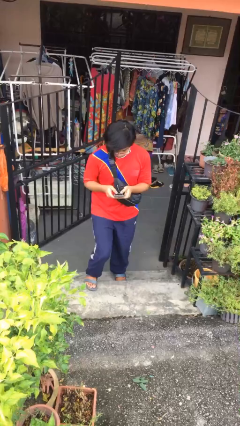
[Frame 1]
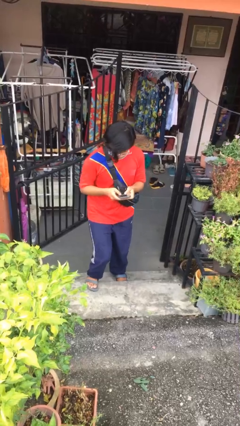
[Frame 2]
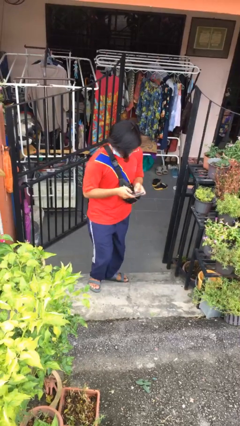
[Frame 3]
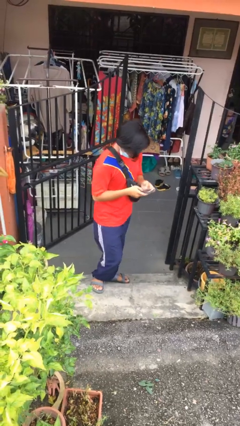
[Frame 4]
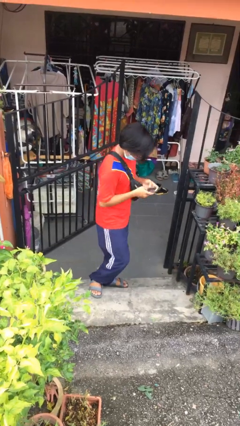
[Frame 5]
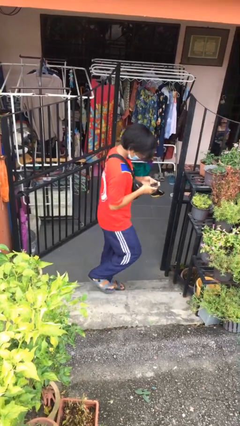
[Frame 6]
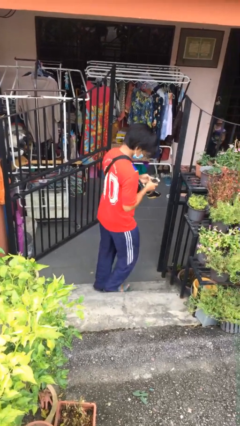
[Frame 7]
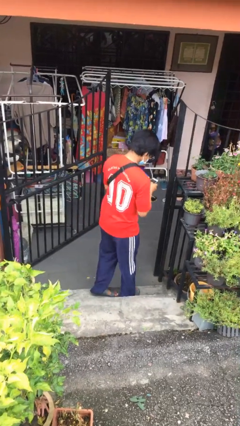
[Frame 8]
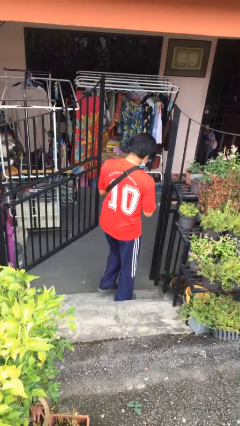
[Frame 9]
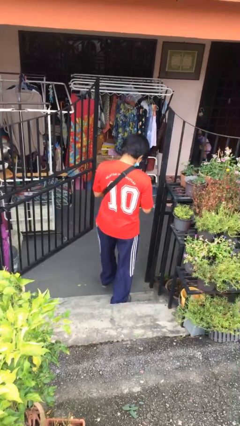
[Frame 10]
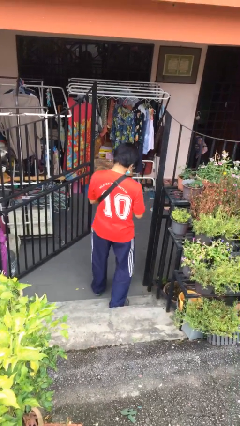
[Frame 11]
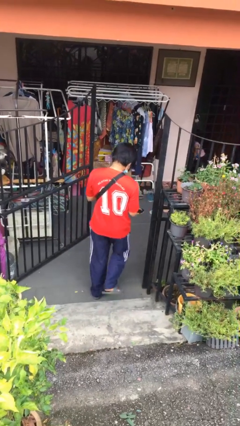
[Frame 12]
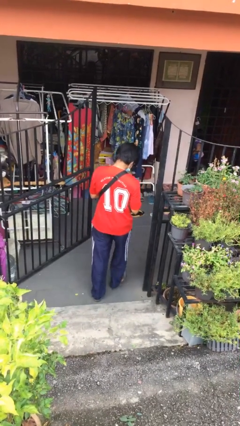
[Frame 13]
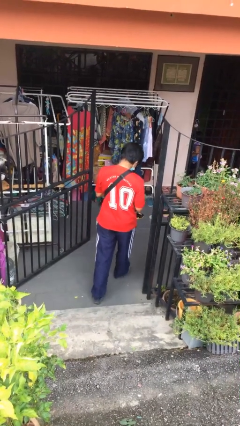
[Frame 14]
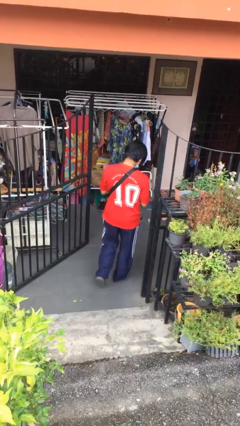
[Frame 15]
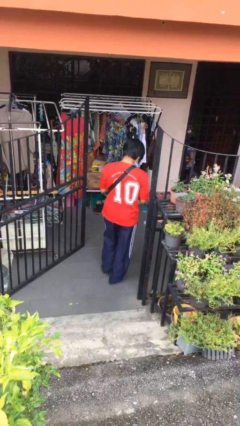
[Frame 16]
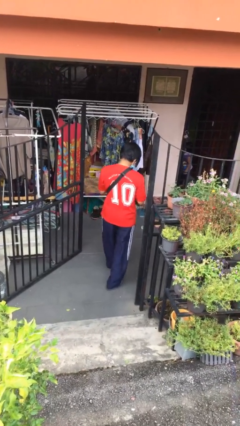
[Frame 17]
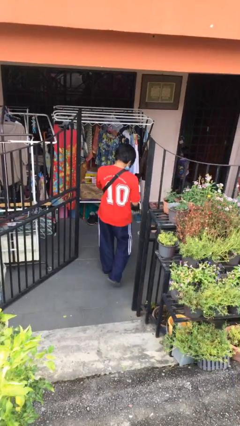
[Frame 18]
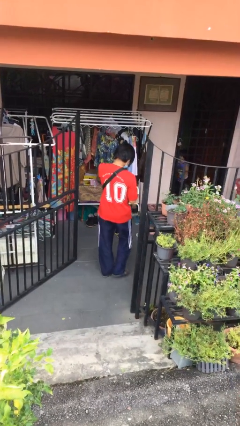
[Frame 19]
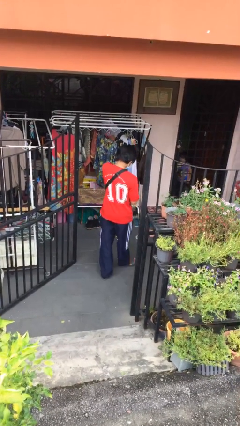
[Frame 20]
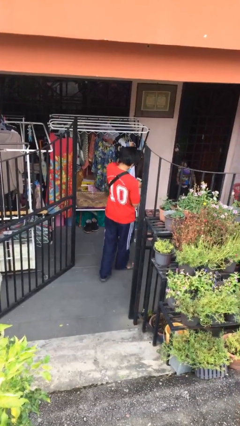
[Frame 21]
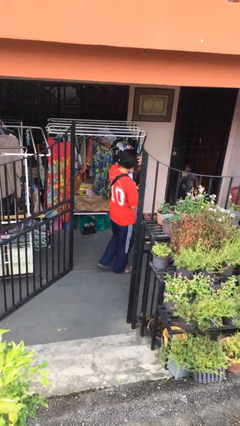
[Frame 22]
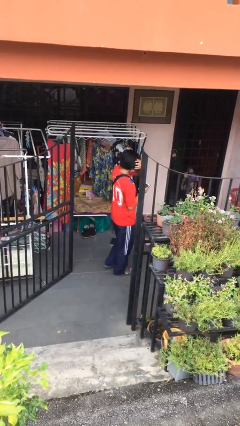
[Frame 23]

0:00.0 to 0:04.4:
person exits scene through structure

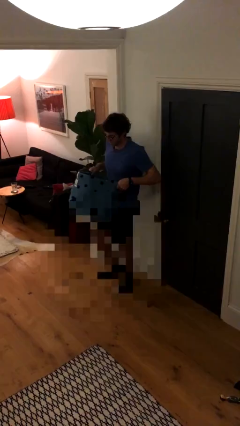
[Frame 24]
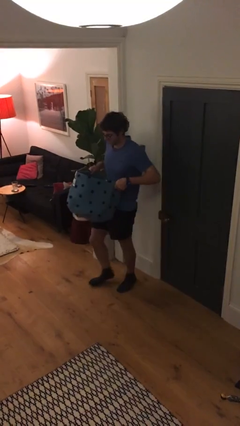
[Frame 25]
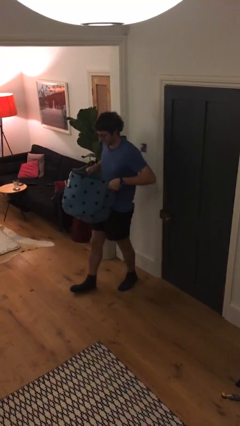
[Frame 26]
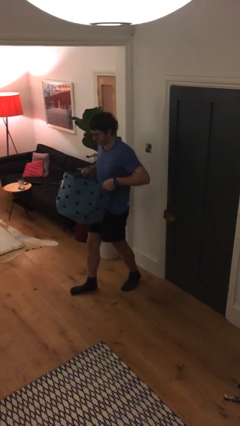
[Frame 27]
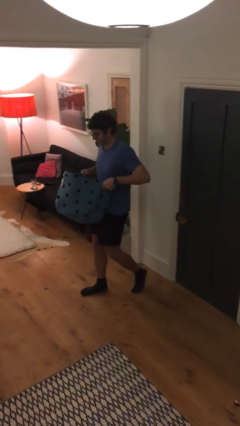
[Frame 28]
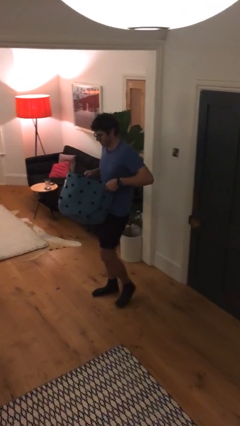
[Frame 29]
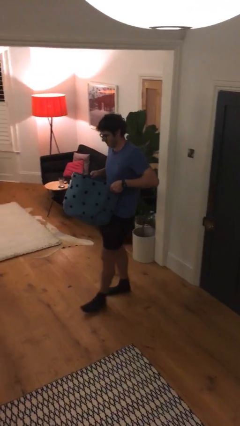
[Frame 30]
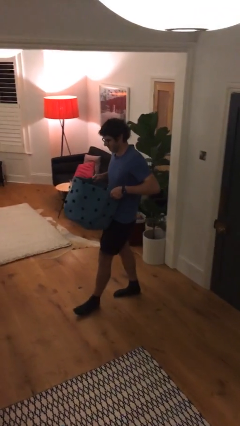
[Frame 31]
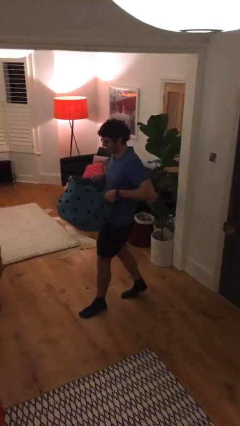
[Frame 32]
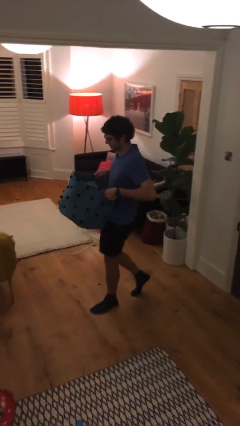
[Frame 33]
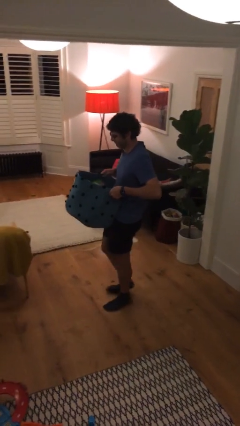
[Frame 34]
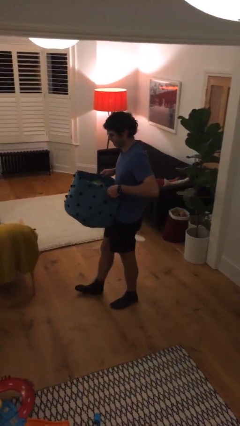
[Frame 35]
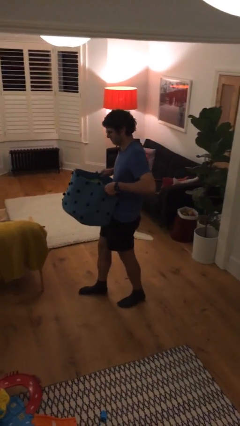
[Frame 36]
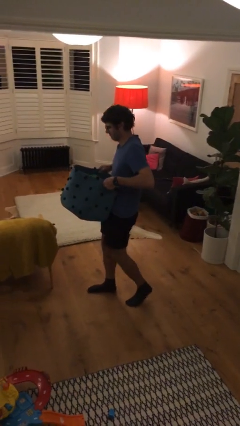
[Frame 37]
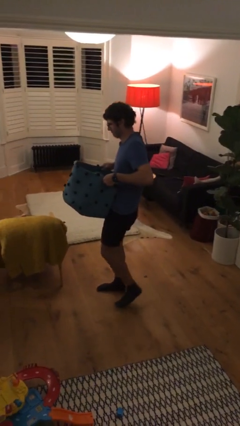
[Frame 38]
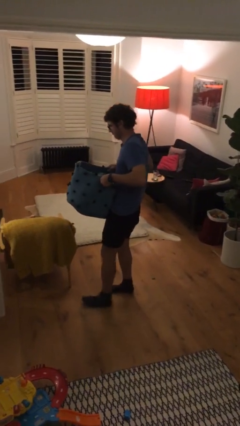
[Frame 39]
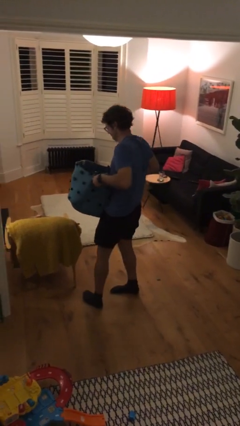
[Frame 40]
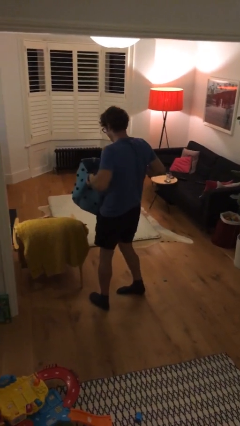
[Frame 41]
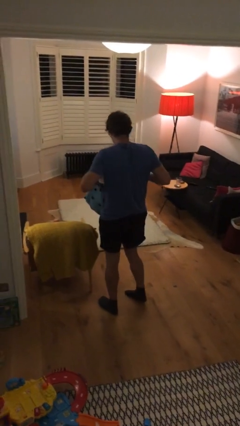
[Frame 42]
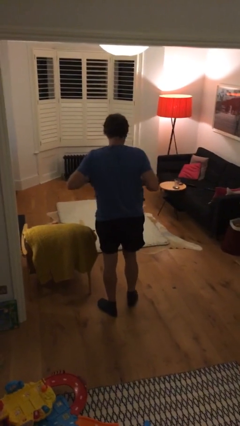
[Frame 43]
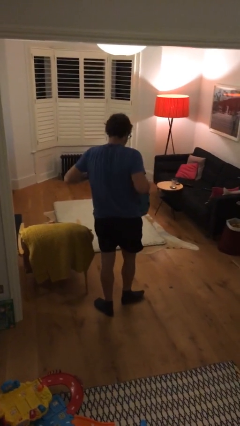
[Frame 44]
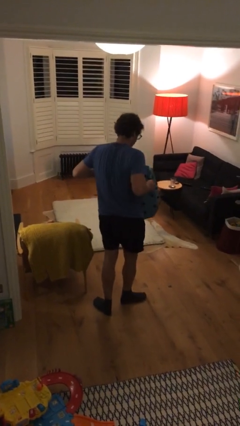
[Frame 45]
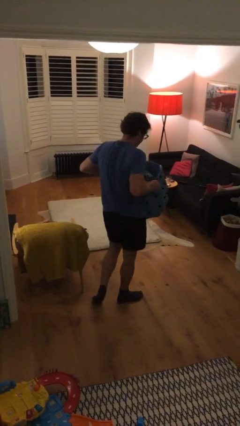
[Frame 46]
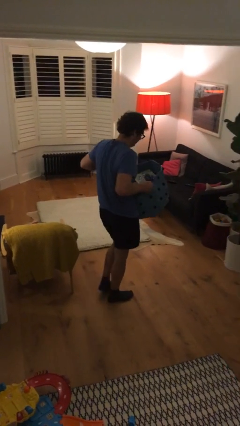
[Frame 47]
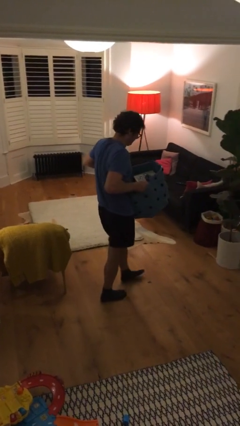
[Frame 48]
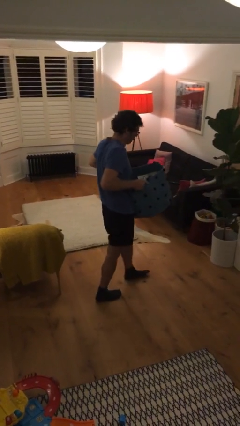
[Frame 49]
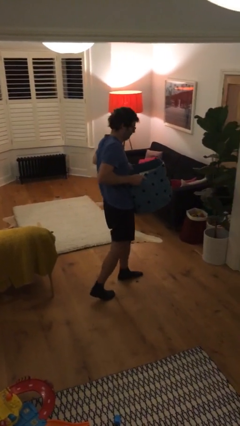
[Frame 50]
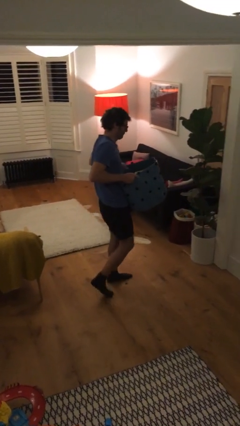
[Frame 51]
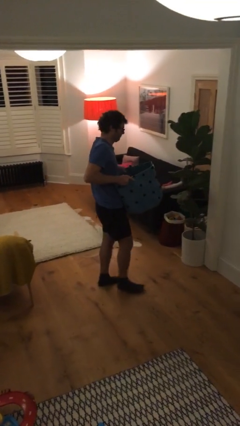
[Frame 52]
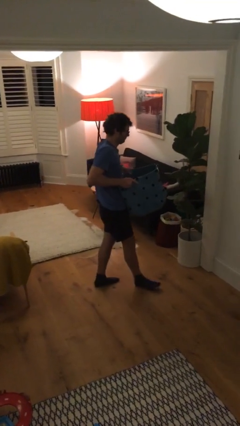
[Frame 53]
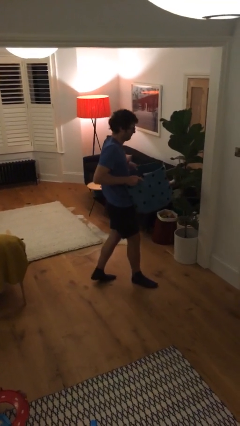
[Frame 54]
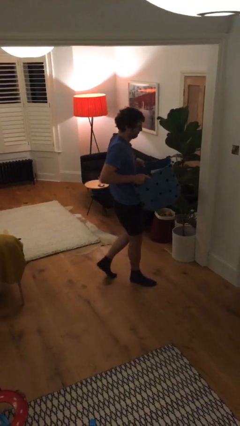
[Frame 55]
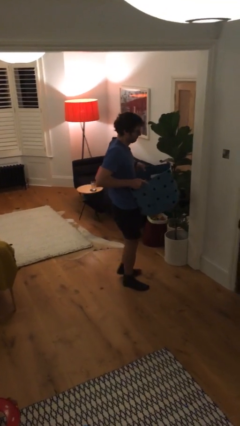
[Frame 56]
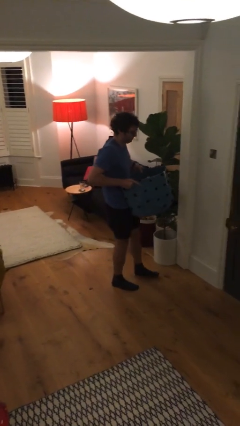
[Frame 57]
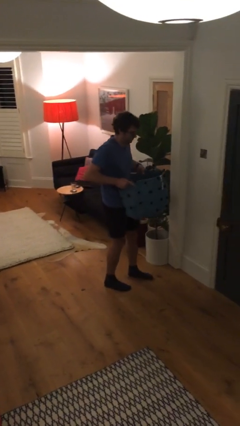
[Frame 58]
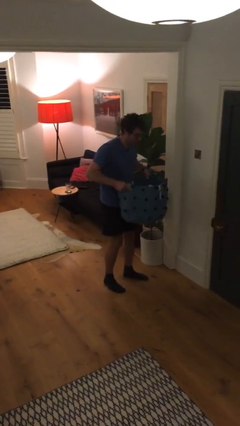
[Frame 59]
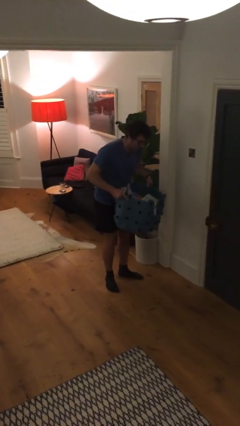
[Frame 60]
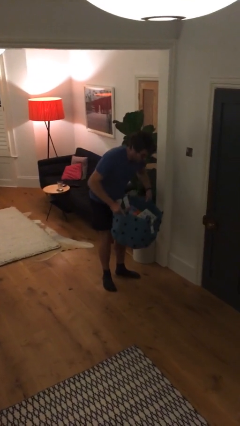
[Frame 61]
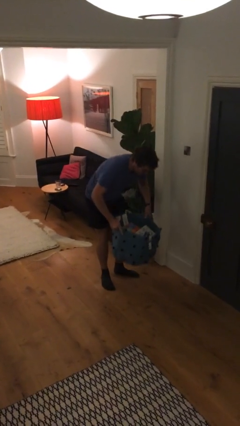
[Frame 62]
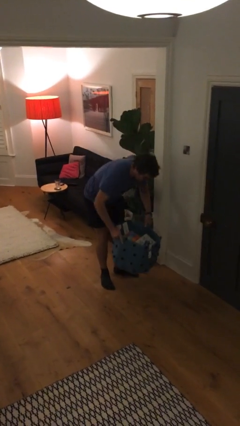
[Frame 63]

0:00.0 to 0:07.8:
person carries heavy object

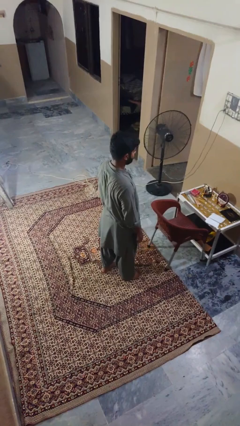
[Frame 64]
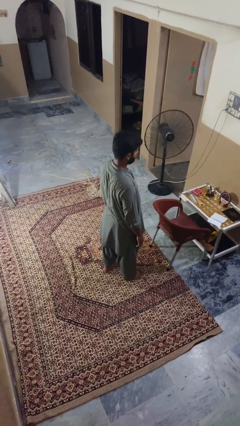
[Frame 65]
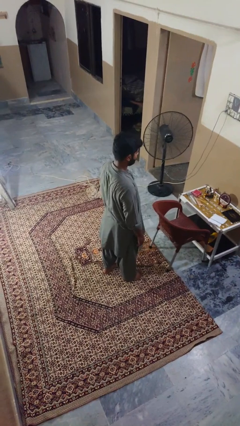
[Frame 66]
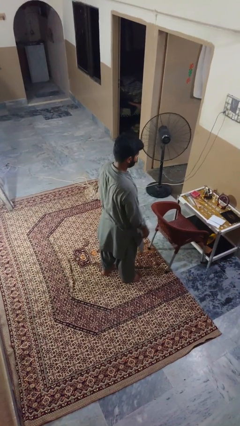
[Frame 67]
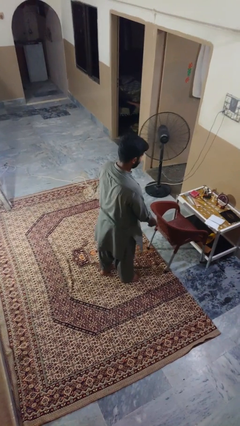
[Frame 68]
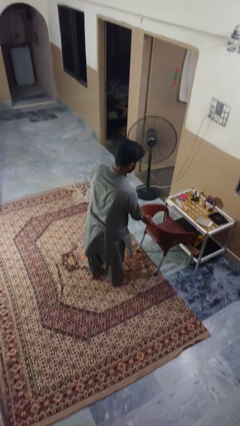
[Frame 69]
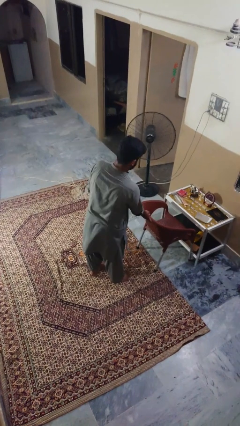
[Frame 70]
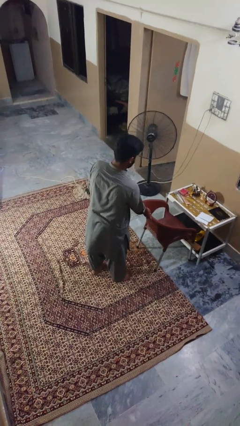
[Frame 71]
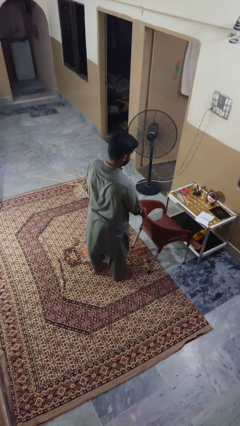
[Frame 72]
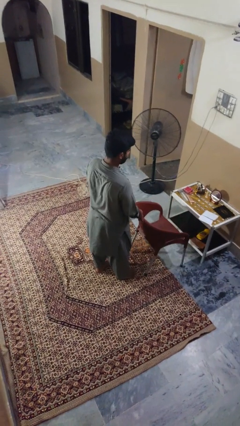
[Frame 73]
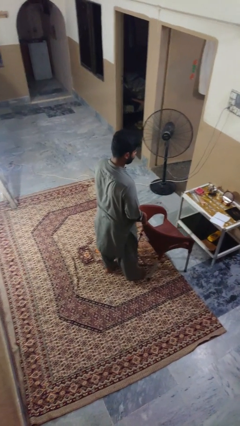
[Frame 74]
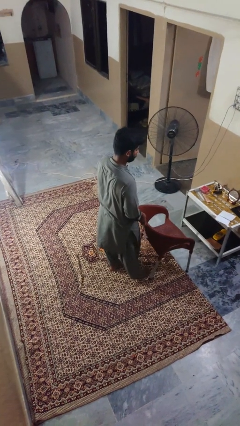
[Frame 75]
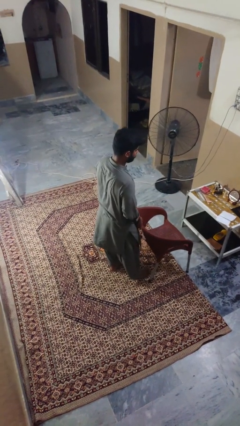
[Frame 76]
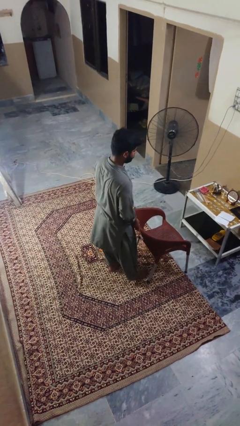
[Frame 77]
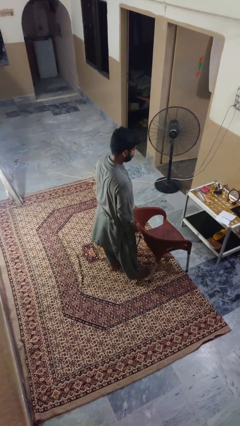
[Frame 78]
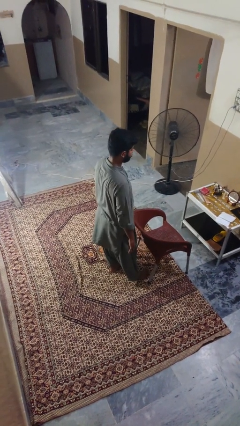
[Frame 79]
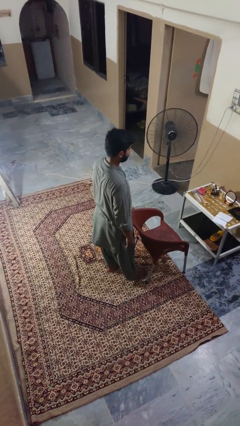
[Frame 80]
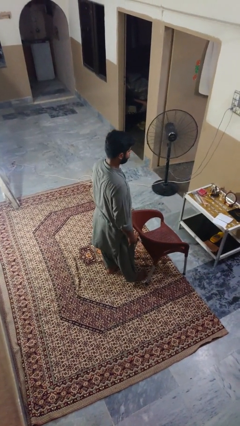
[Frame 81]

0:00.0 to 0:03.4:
person pulls out chair

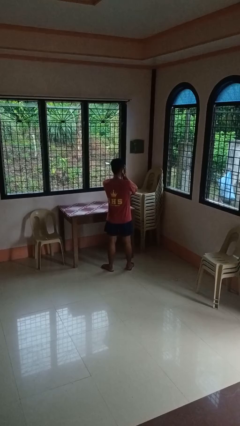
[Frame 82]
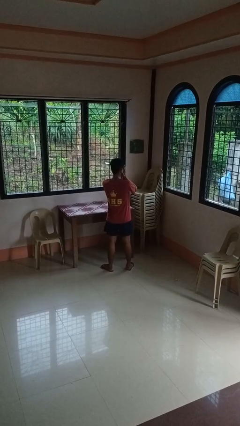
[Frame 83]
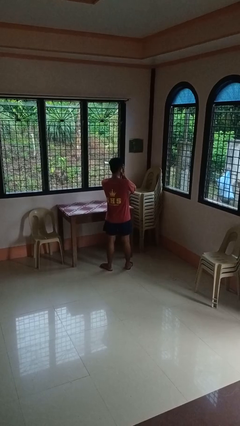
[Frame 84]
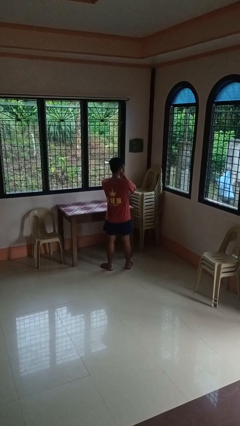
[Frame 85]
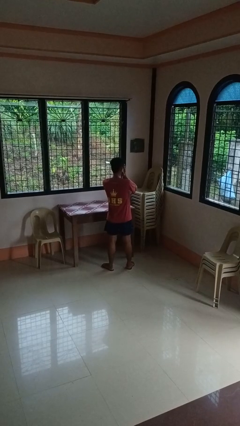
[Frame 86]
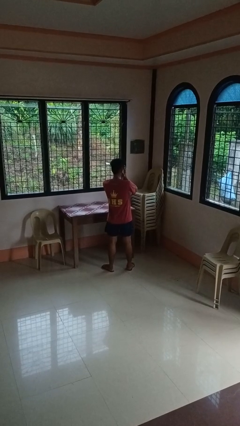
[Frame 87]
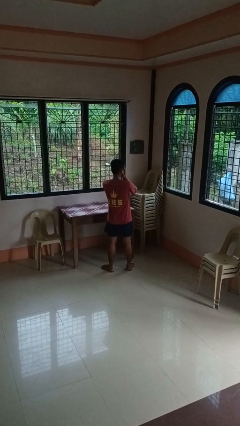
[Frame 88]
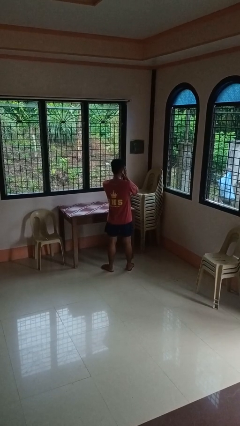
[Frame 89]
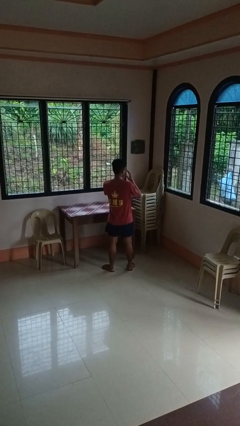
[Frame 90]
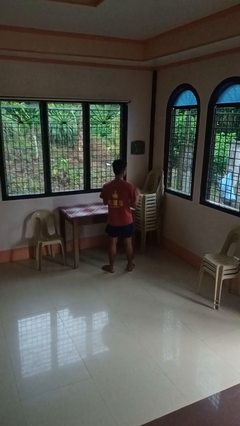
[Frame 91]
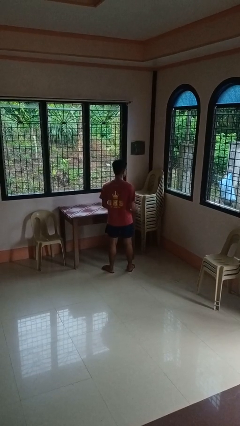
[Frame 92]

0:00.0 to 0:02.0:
person covers face with hands

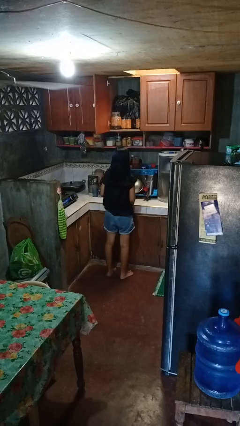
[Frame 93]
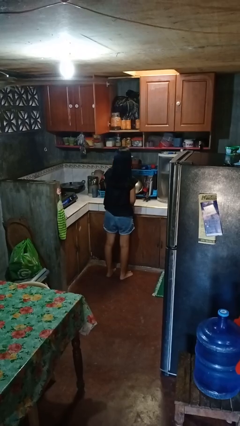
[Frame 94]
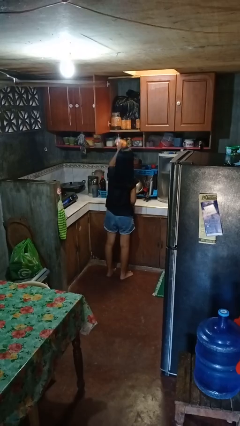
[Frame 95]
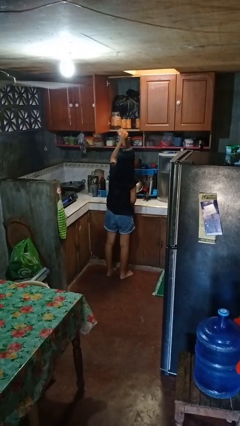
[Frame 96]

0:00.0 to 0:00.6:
person puts down object into cabinet
